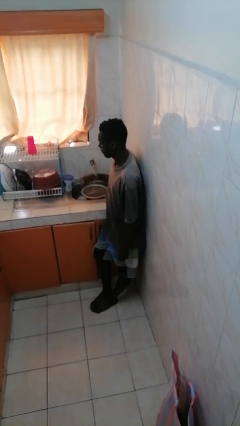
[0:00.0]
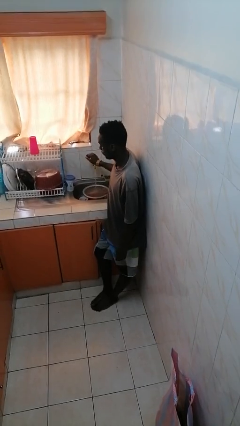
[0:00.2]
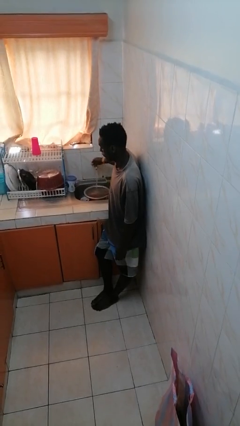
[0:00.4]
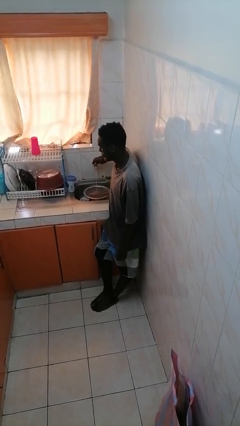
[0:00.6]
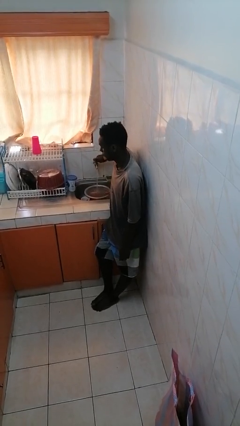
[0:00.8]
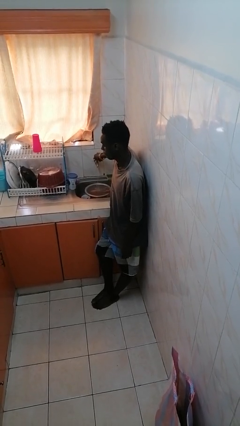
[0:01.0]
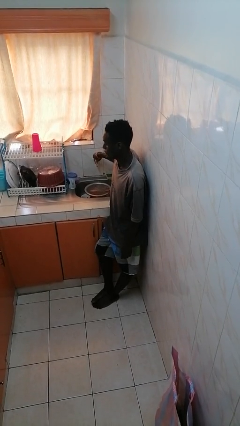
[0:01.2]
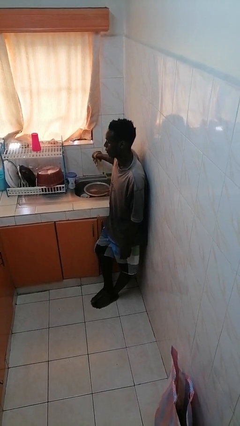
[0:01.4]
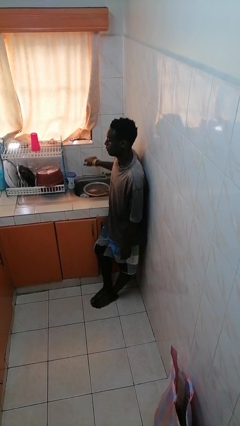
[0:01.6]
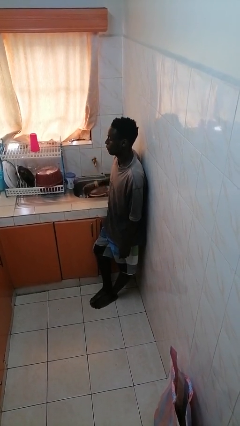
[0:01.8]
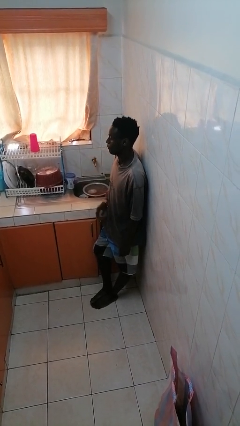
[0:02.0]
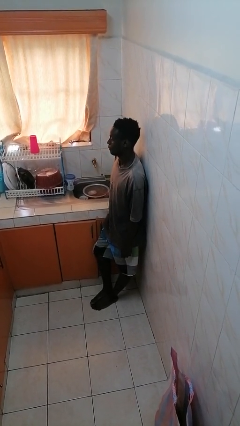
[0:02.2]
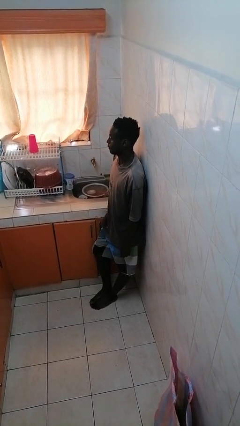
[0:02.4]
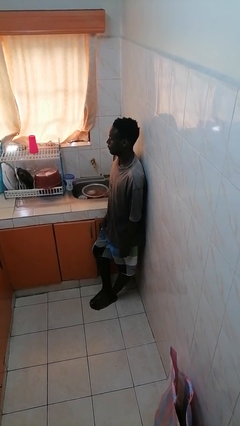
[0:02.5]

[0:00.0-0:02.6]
person turns off faucet

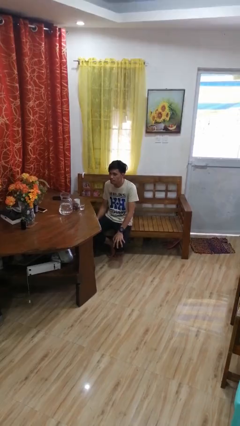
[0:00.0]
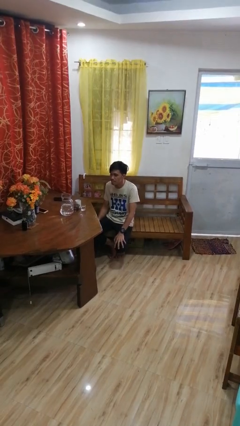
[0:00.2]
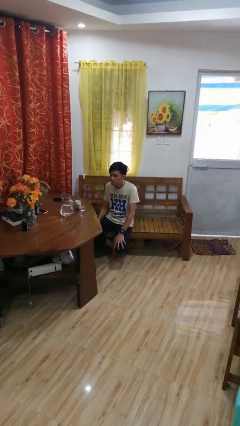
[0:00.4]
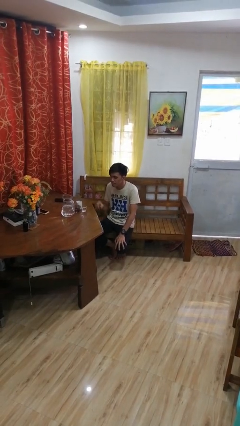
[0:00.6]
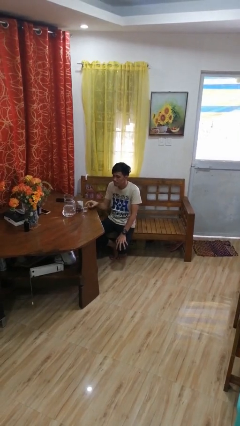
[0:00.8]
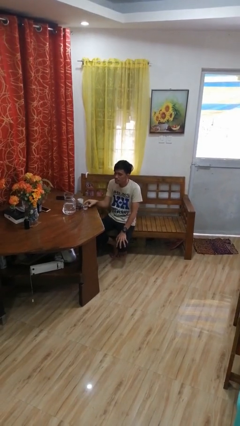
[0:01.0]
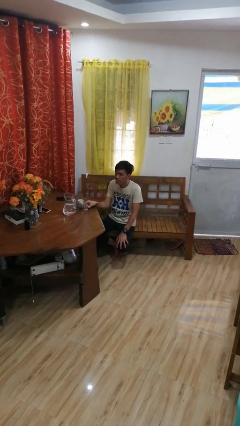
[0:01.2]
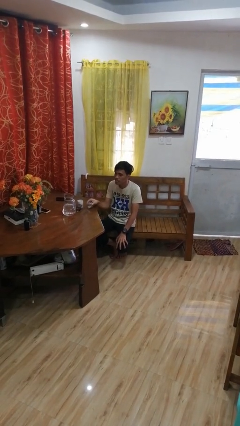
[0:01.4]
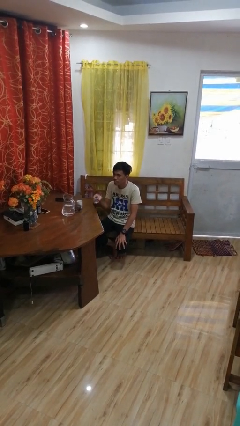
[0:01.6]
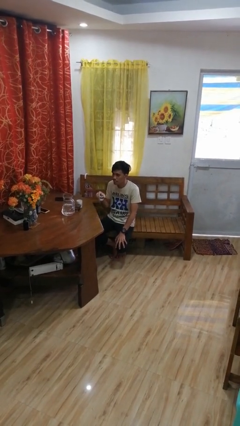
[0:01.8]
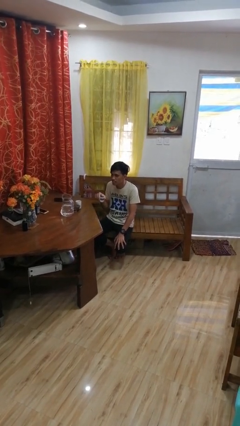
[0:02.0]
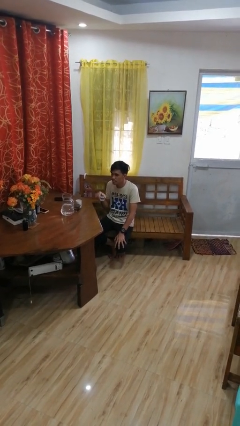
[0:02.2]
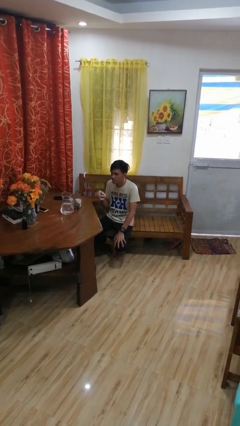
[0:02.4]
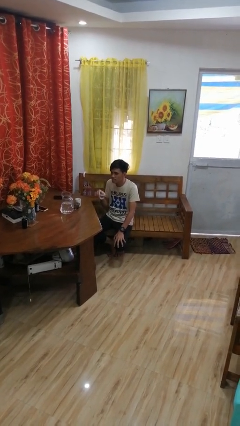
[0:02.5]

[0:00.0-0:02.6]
person picks up object from table

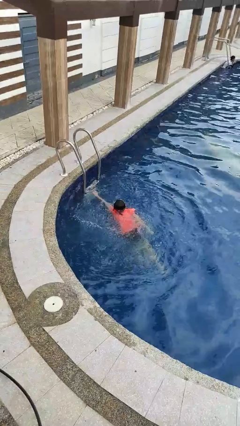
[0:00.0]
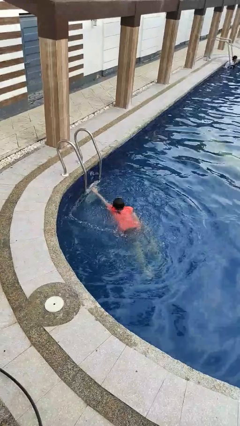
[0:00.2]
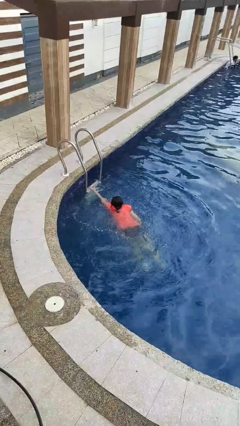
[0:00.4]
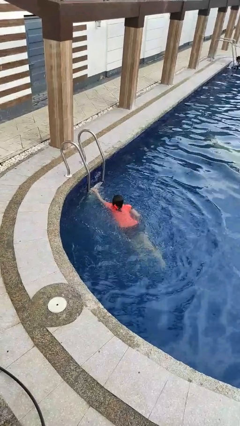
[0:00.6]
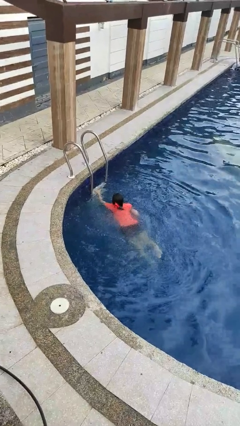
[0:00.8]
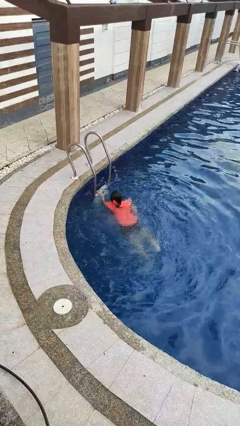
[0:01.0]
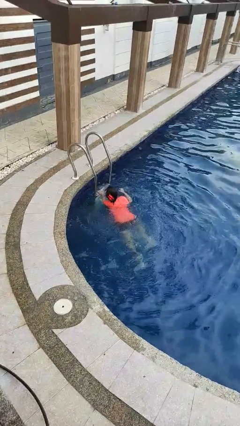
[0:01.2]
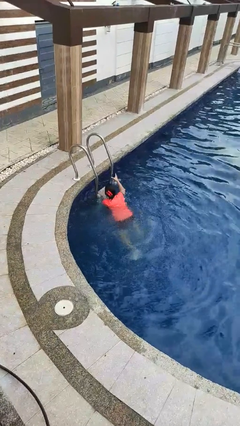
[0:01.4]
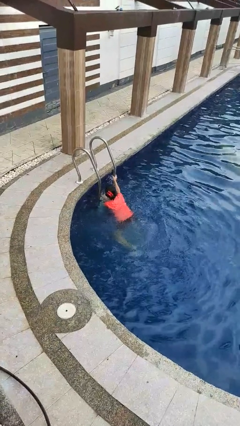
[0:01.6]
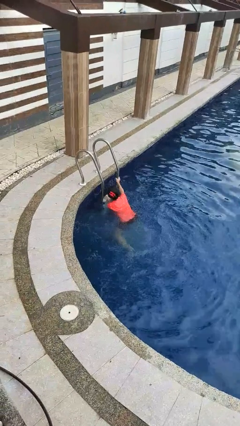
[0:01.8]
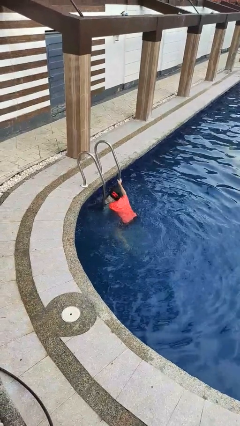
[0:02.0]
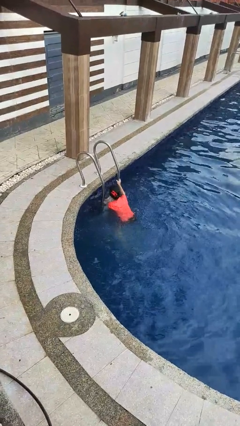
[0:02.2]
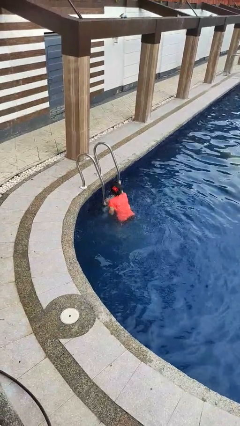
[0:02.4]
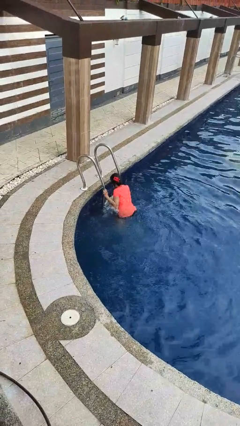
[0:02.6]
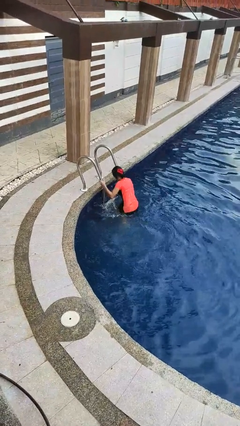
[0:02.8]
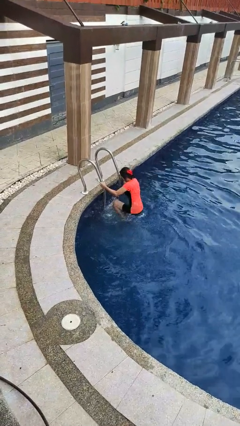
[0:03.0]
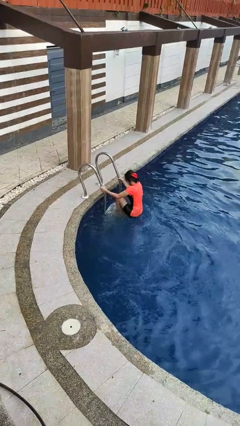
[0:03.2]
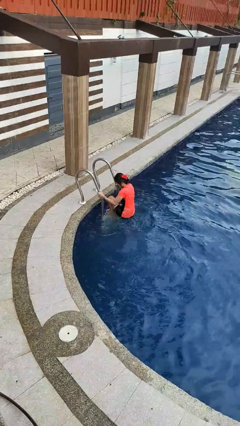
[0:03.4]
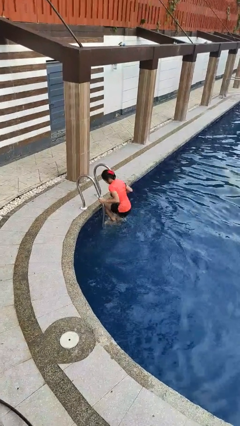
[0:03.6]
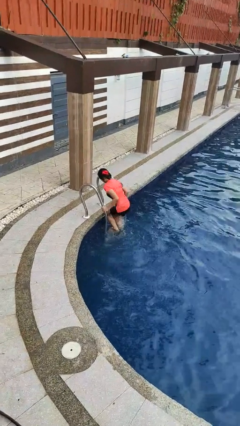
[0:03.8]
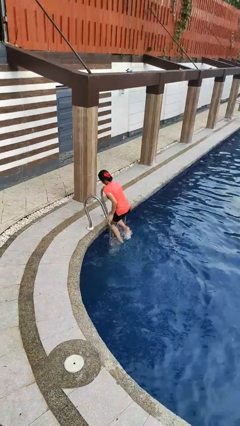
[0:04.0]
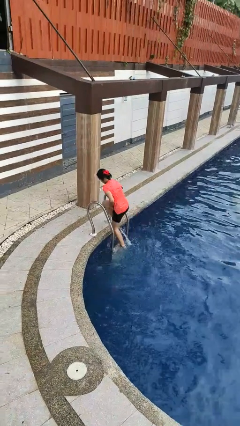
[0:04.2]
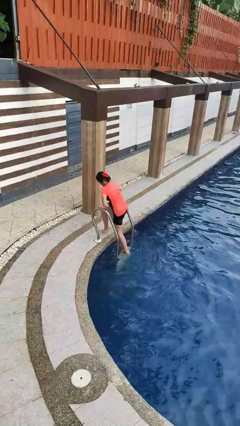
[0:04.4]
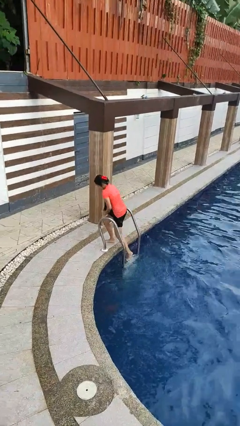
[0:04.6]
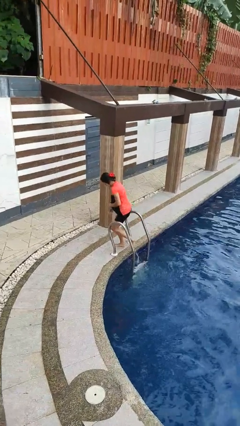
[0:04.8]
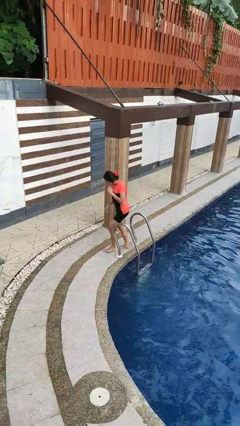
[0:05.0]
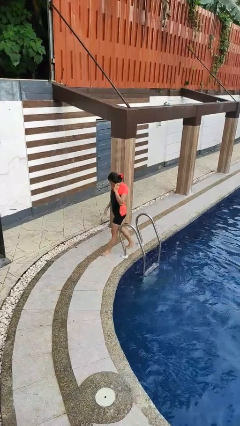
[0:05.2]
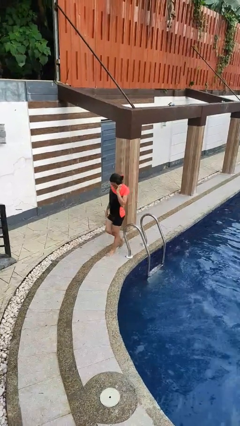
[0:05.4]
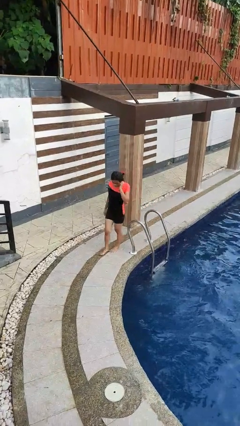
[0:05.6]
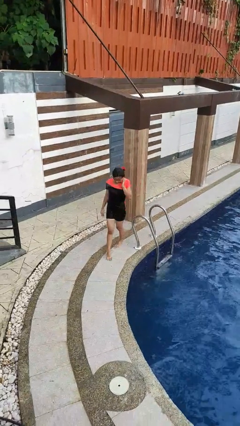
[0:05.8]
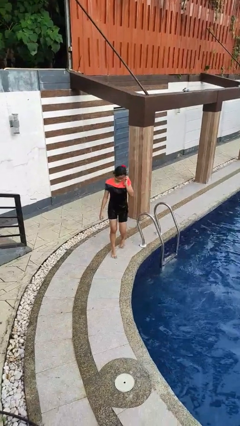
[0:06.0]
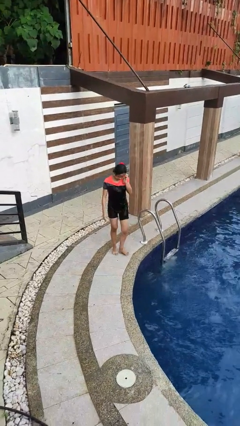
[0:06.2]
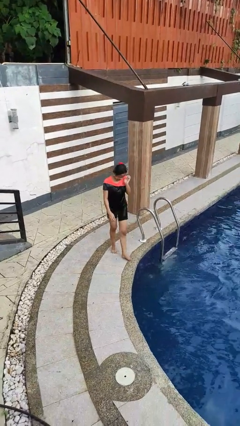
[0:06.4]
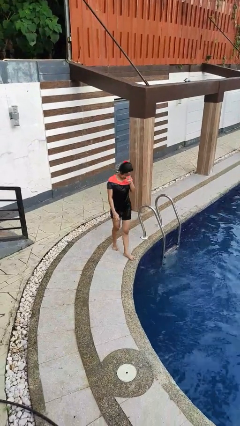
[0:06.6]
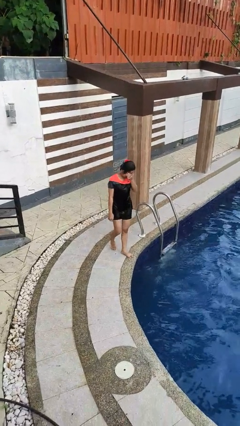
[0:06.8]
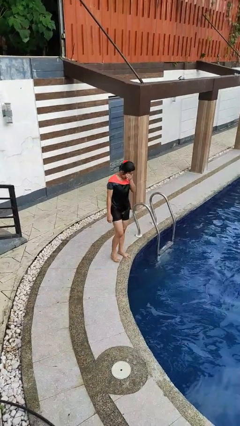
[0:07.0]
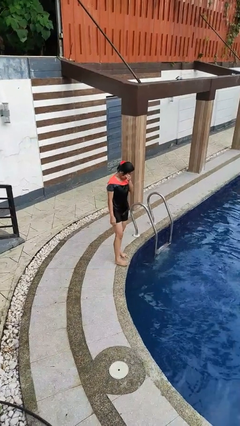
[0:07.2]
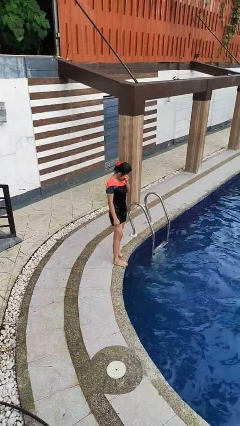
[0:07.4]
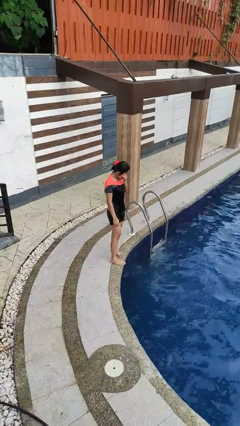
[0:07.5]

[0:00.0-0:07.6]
person exits pool

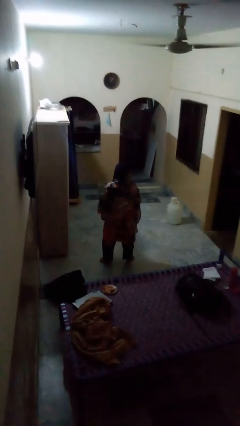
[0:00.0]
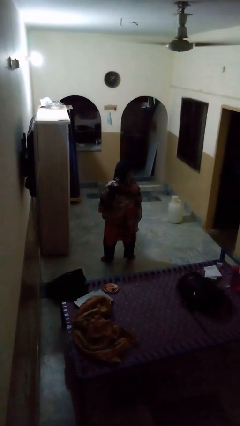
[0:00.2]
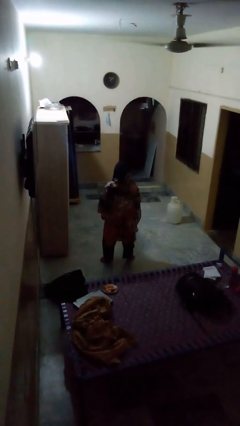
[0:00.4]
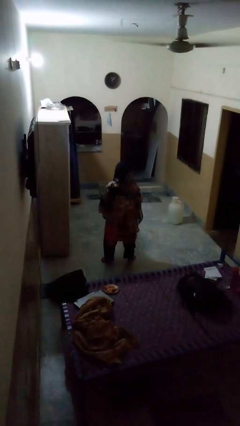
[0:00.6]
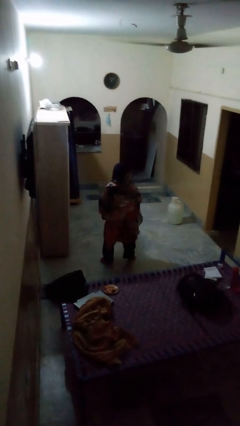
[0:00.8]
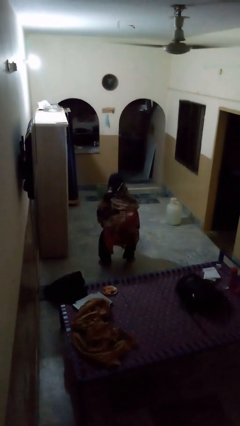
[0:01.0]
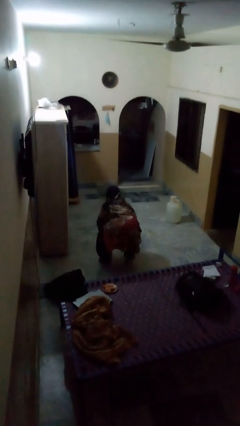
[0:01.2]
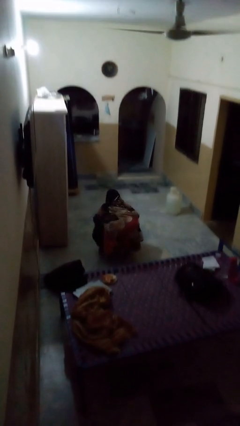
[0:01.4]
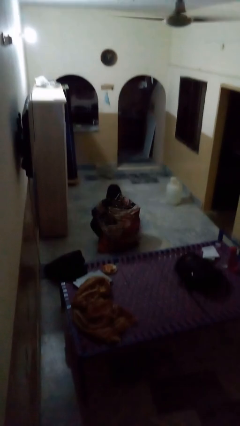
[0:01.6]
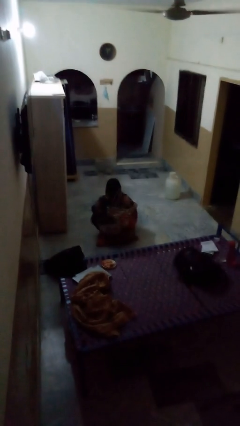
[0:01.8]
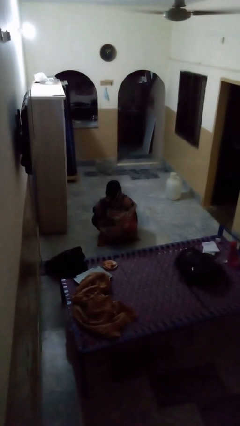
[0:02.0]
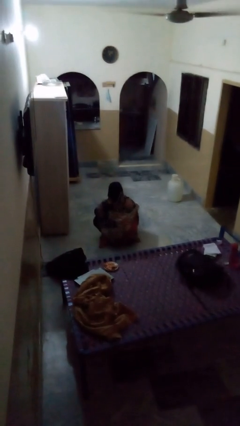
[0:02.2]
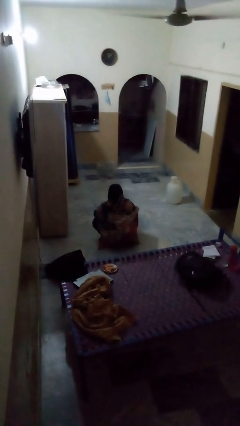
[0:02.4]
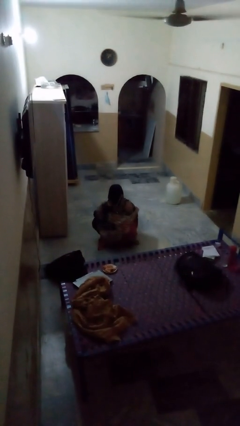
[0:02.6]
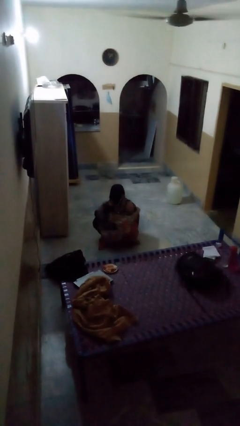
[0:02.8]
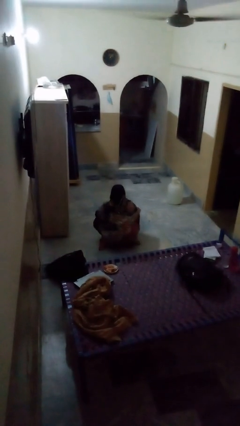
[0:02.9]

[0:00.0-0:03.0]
person squats

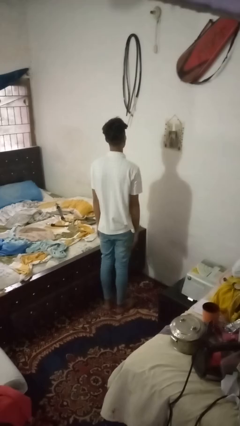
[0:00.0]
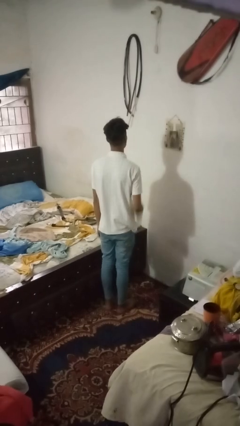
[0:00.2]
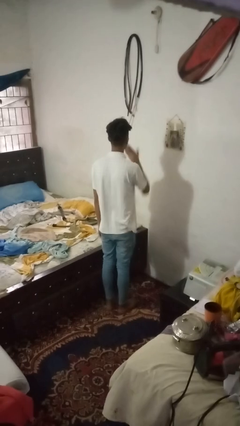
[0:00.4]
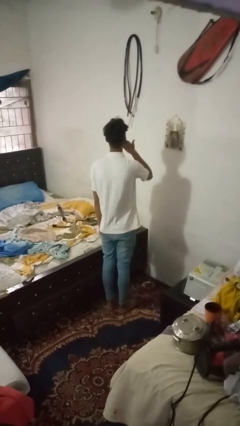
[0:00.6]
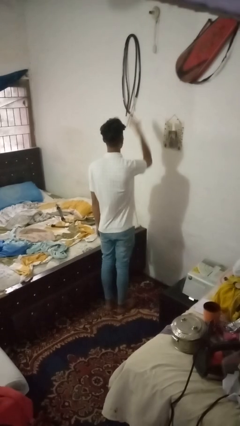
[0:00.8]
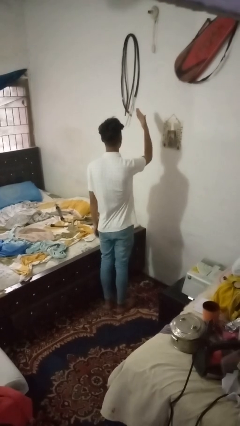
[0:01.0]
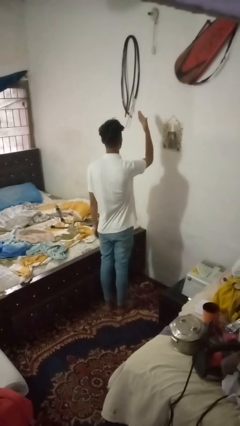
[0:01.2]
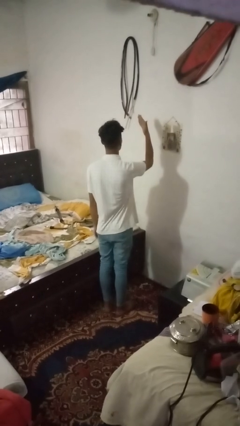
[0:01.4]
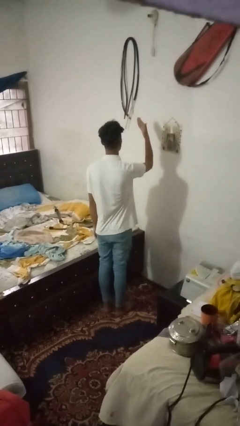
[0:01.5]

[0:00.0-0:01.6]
person gestures blow kiss
